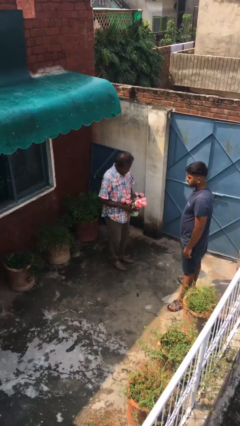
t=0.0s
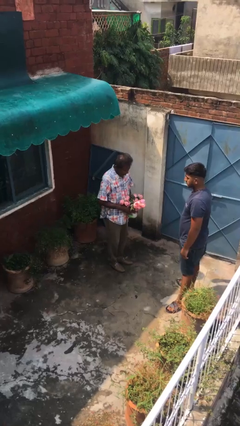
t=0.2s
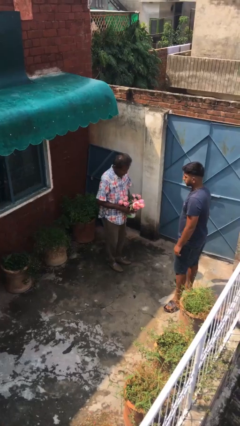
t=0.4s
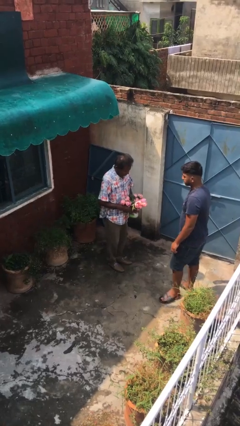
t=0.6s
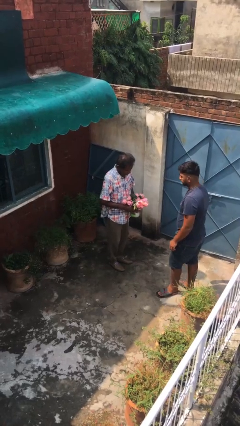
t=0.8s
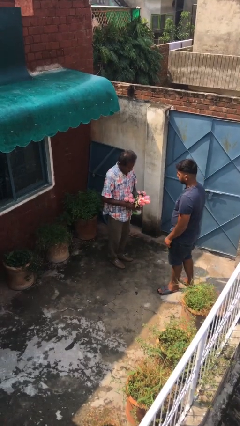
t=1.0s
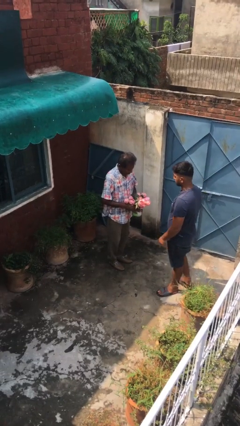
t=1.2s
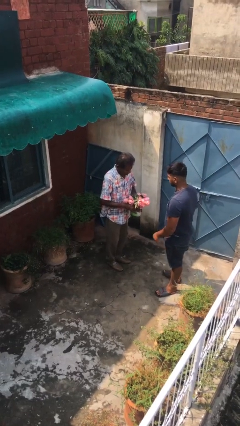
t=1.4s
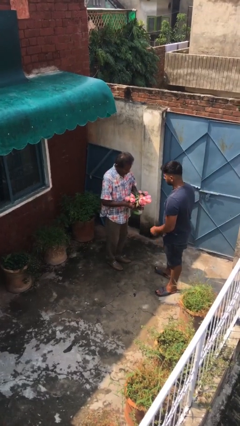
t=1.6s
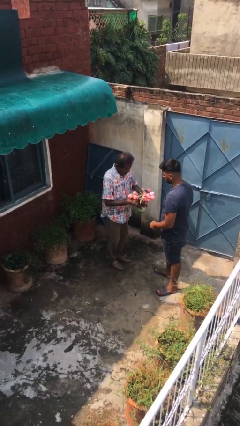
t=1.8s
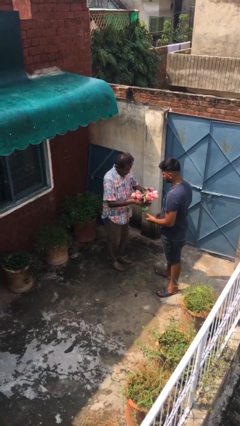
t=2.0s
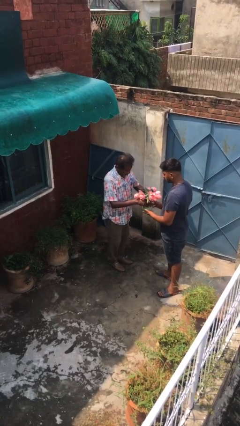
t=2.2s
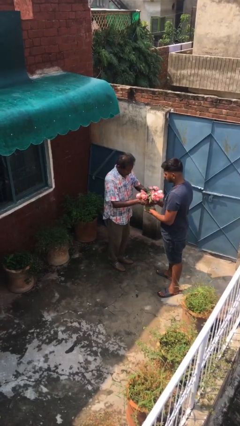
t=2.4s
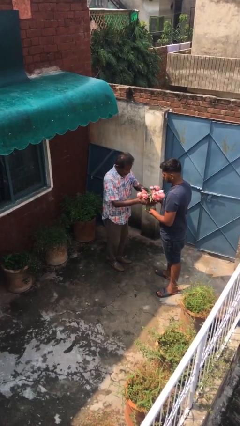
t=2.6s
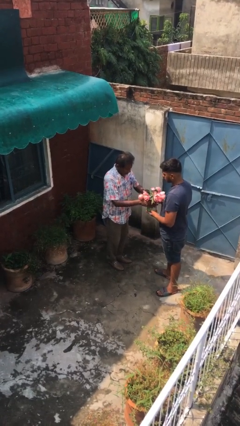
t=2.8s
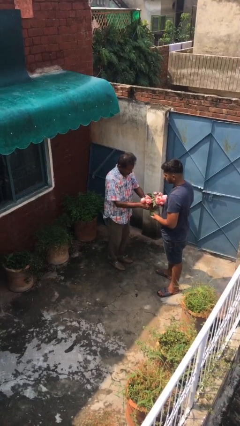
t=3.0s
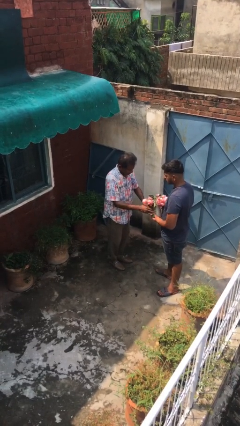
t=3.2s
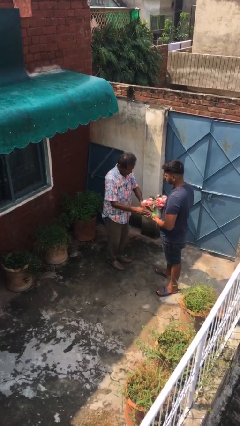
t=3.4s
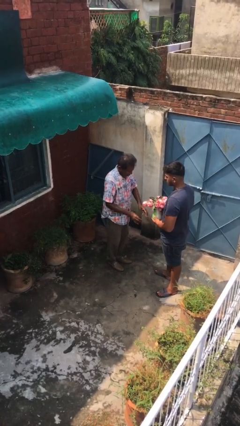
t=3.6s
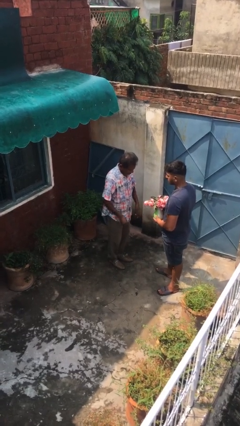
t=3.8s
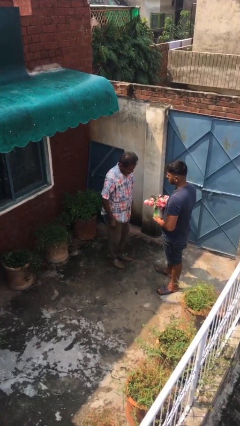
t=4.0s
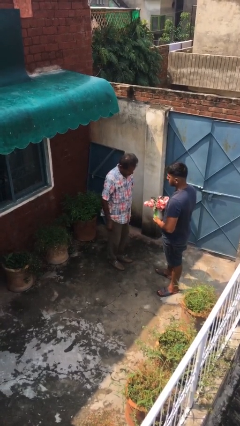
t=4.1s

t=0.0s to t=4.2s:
person transfers object to person

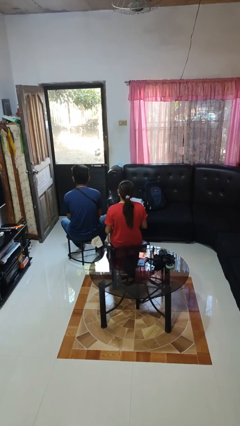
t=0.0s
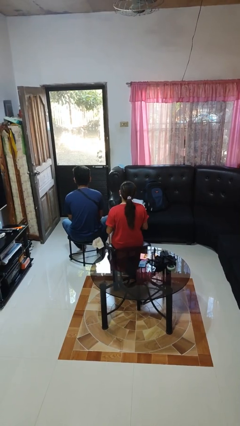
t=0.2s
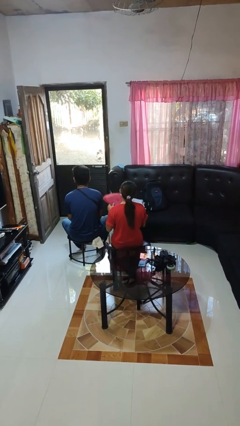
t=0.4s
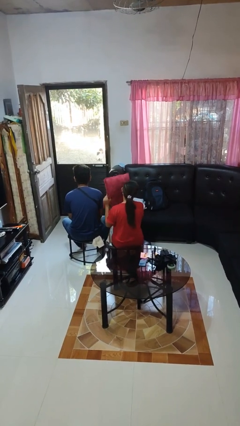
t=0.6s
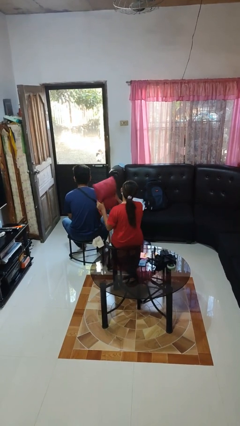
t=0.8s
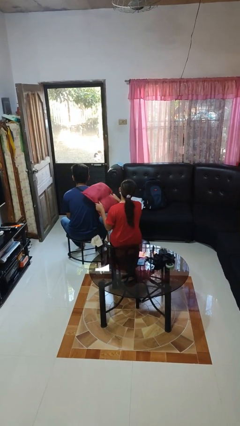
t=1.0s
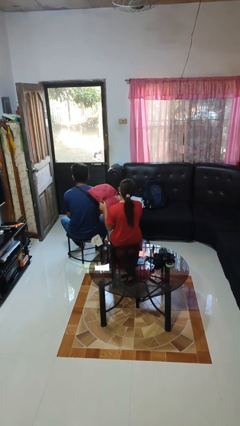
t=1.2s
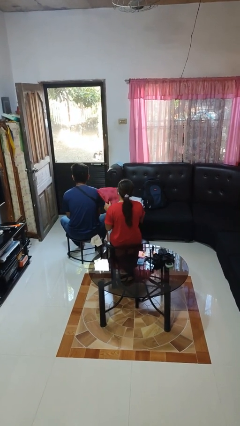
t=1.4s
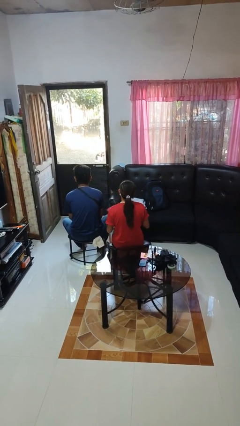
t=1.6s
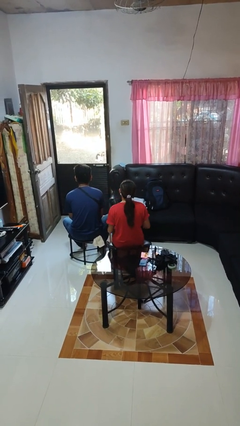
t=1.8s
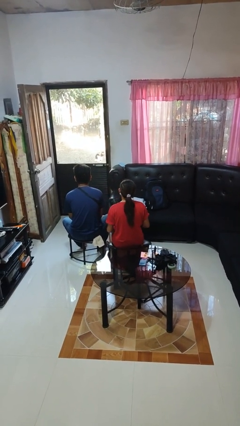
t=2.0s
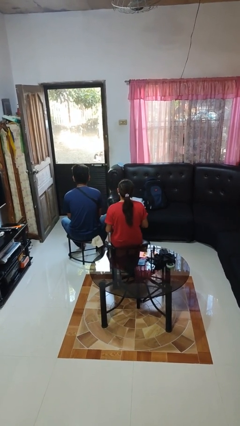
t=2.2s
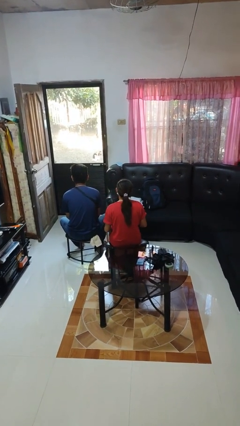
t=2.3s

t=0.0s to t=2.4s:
person hits person with pillow

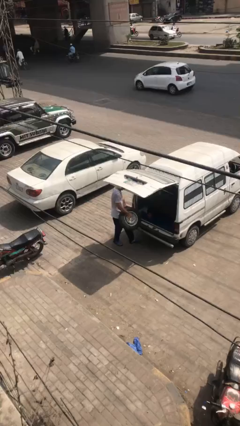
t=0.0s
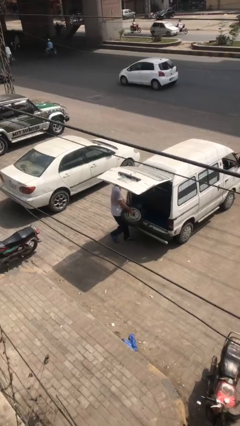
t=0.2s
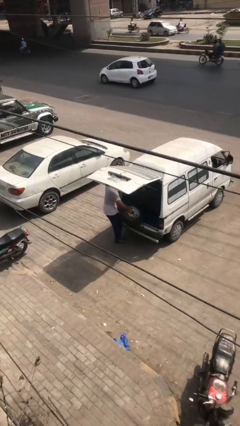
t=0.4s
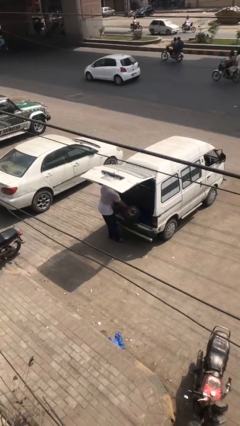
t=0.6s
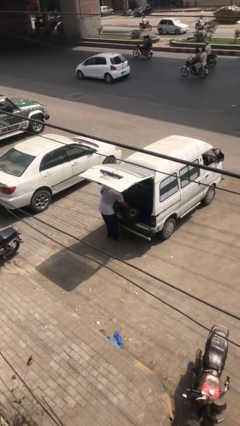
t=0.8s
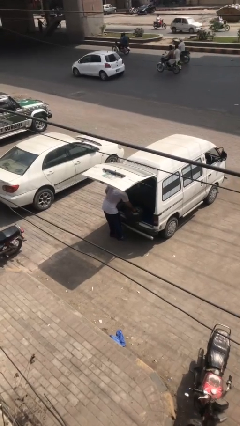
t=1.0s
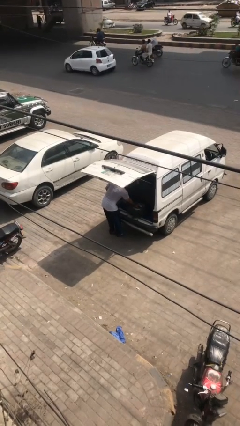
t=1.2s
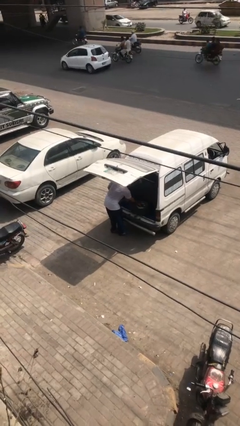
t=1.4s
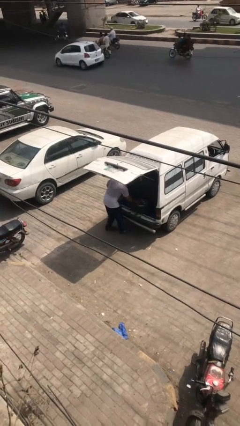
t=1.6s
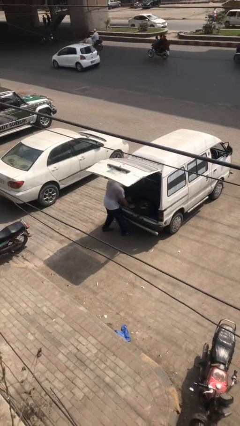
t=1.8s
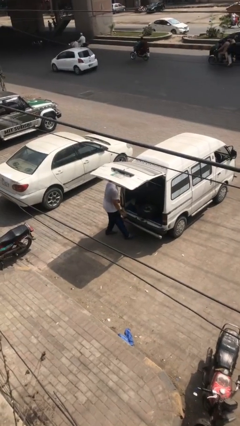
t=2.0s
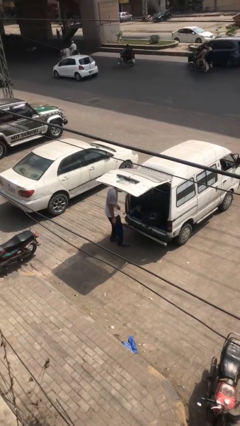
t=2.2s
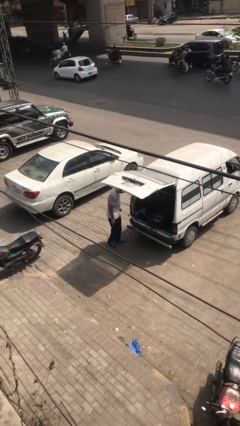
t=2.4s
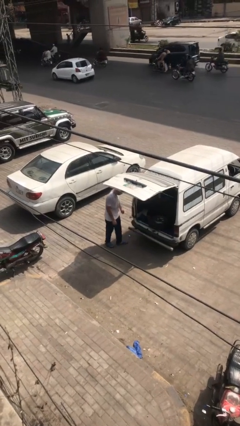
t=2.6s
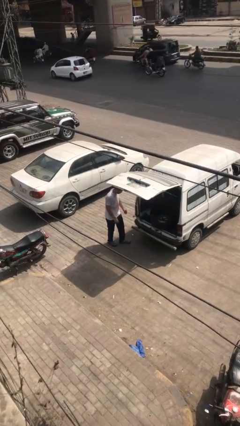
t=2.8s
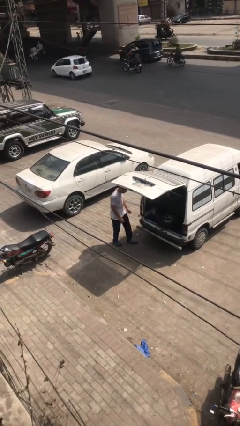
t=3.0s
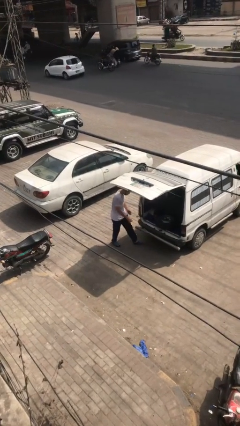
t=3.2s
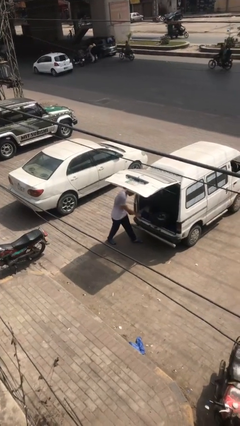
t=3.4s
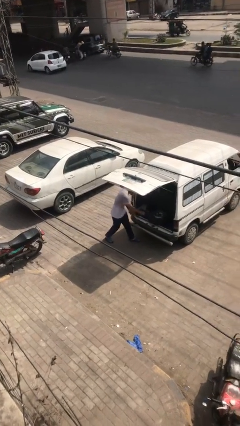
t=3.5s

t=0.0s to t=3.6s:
person loads car

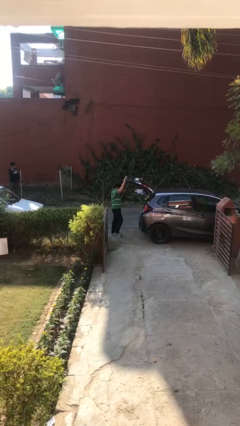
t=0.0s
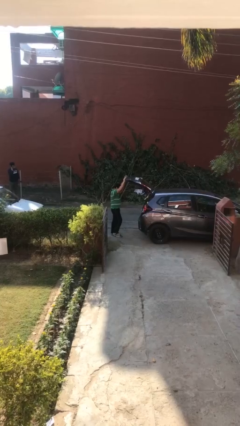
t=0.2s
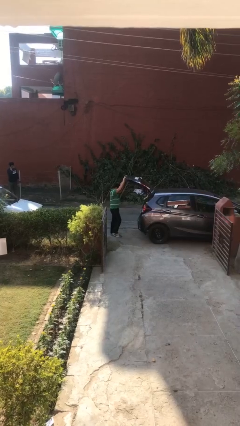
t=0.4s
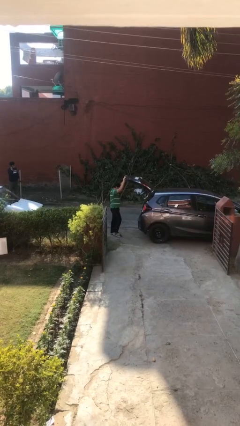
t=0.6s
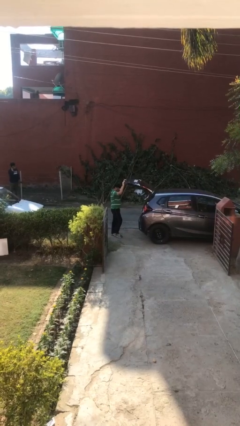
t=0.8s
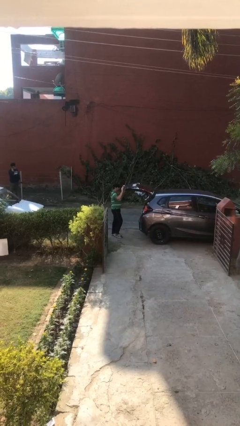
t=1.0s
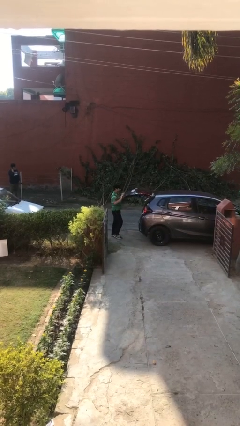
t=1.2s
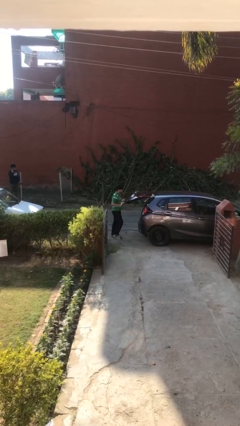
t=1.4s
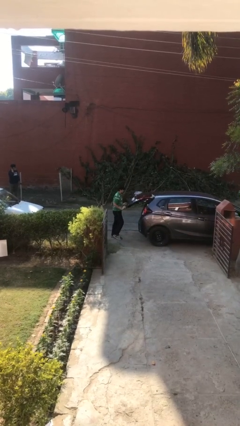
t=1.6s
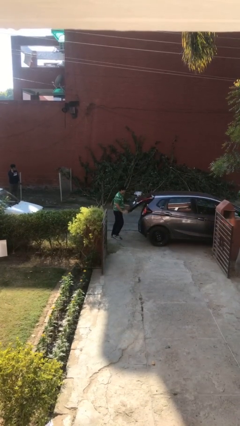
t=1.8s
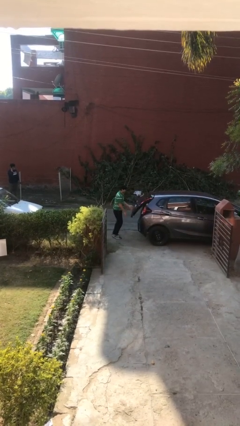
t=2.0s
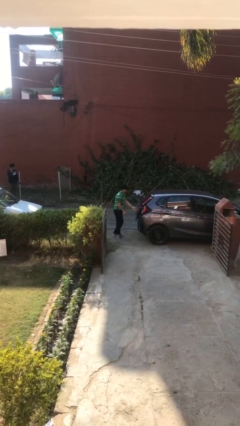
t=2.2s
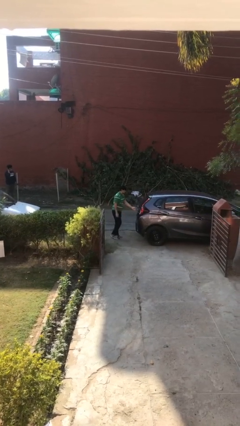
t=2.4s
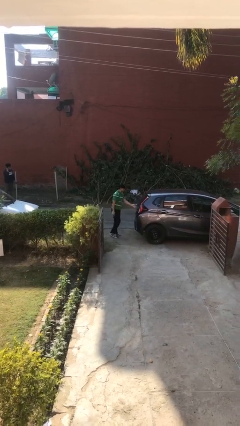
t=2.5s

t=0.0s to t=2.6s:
person closes car trunk

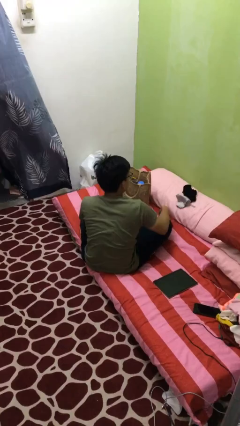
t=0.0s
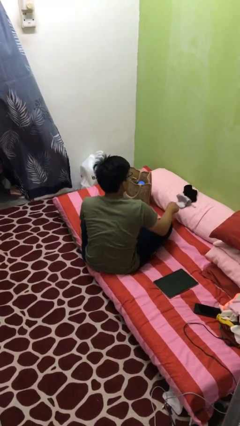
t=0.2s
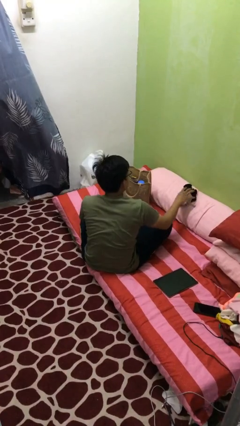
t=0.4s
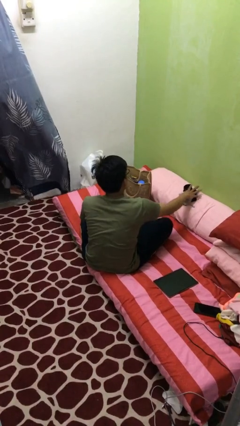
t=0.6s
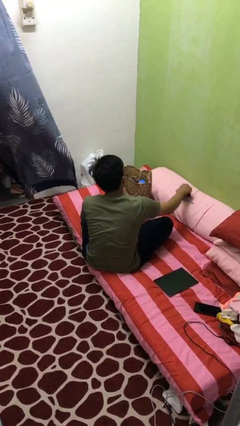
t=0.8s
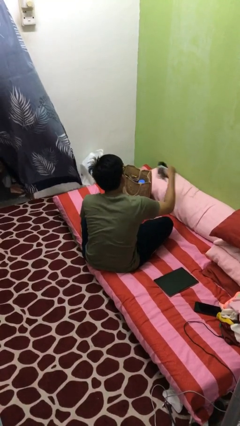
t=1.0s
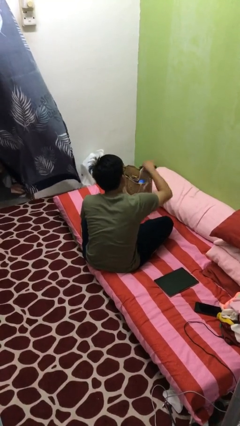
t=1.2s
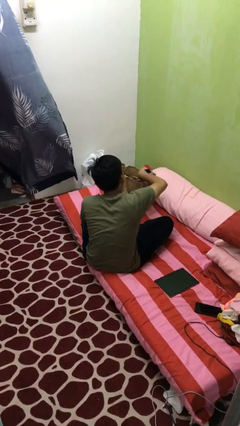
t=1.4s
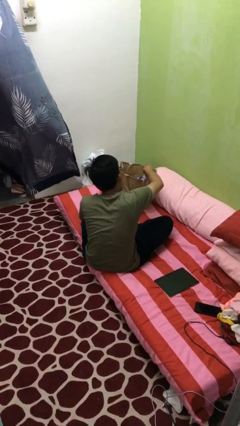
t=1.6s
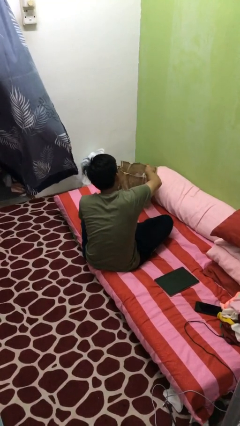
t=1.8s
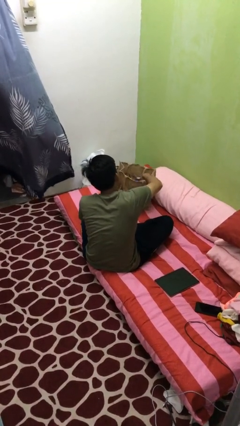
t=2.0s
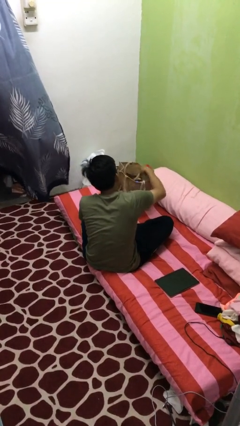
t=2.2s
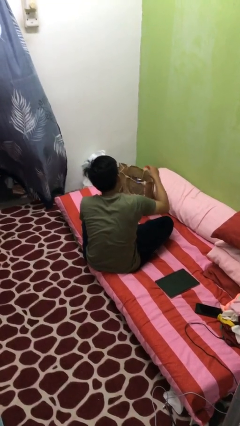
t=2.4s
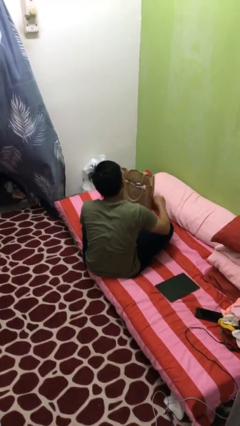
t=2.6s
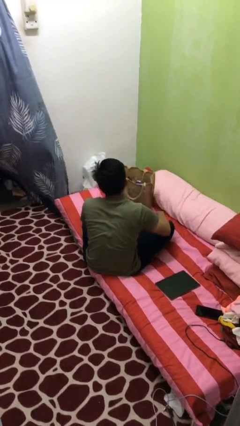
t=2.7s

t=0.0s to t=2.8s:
person puts object into bag

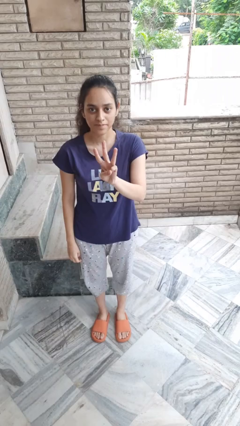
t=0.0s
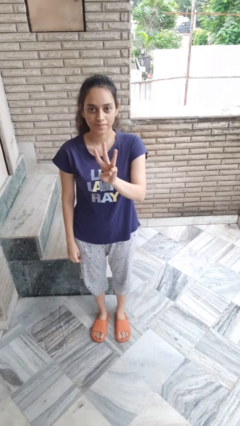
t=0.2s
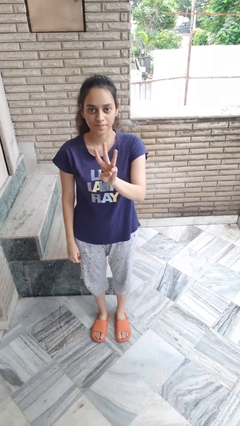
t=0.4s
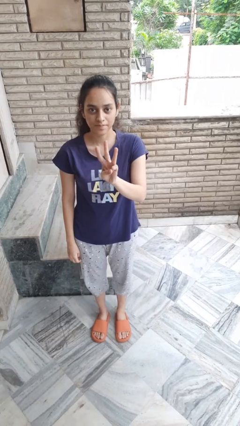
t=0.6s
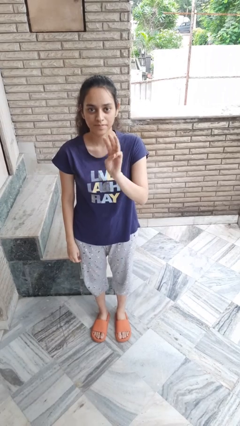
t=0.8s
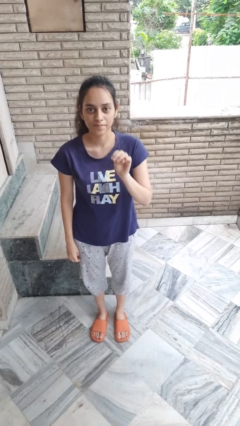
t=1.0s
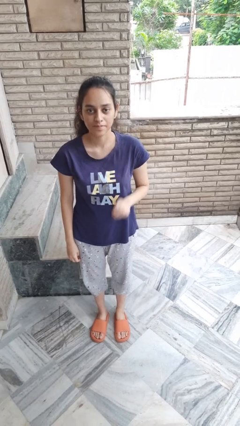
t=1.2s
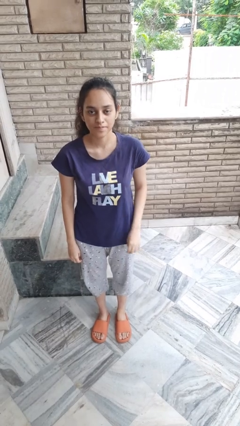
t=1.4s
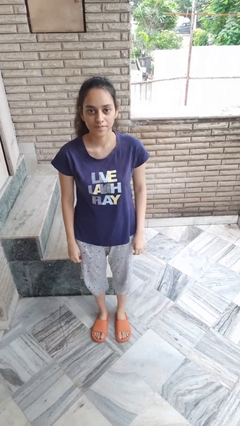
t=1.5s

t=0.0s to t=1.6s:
person gestures number three
